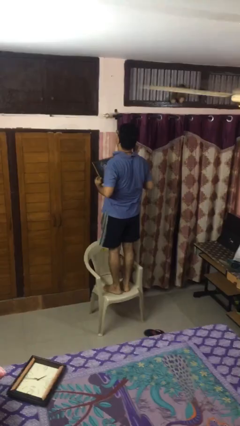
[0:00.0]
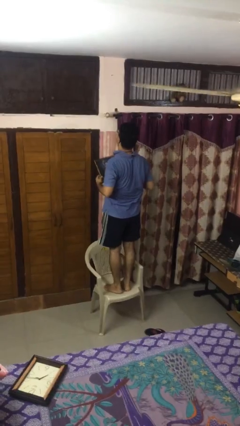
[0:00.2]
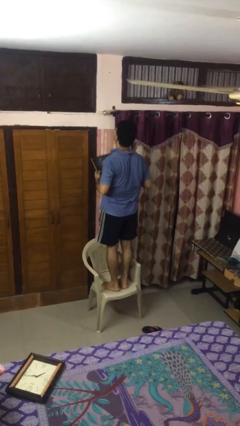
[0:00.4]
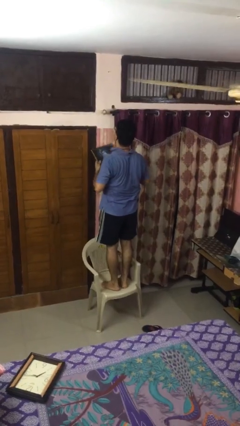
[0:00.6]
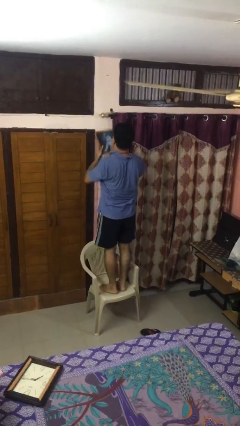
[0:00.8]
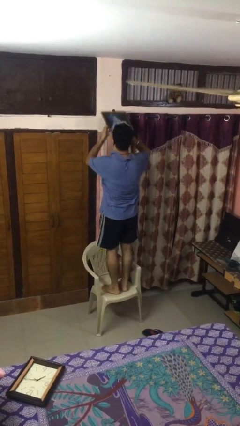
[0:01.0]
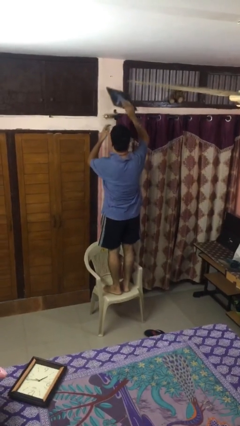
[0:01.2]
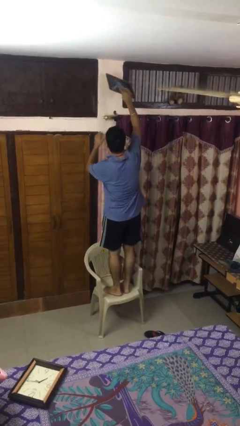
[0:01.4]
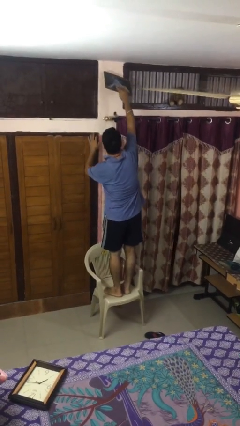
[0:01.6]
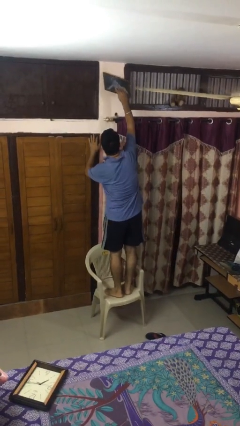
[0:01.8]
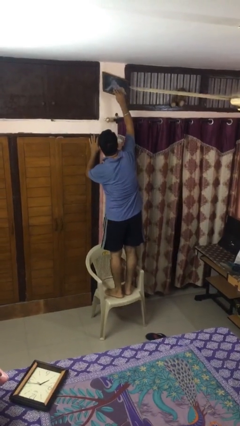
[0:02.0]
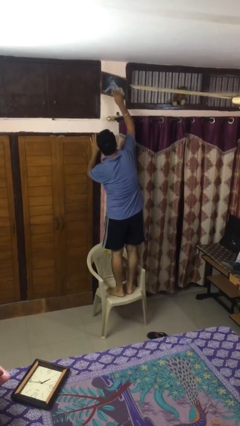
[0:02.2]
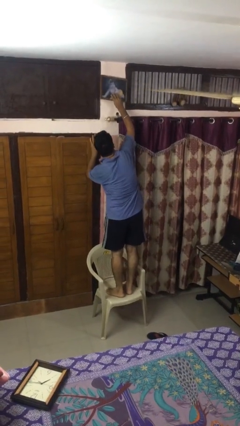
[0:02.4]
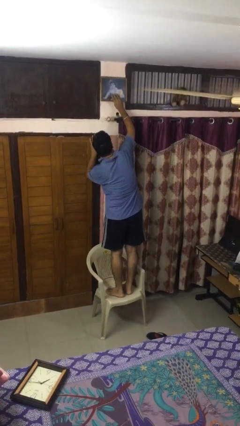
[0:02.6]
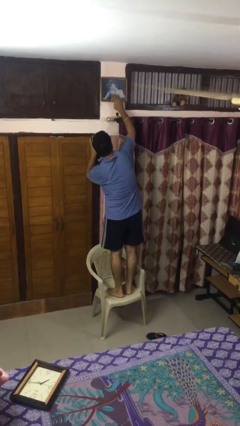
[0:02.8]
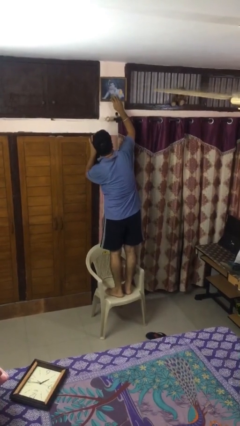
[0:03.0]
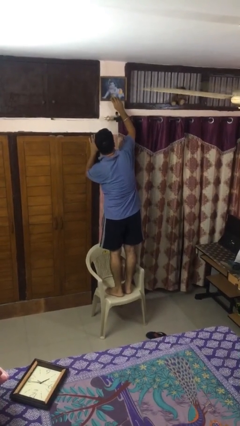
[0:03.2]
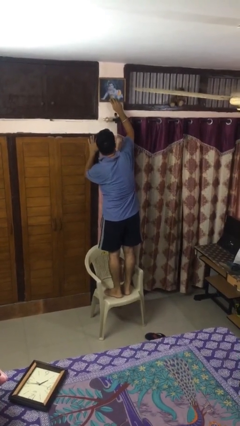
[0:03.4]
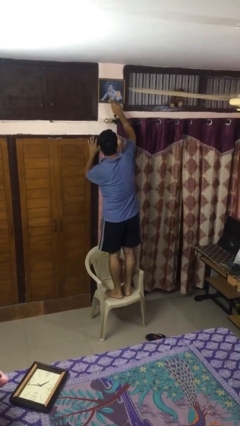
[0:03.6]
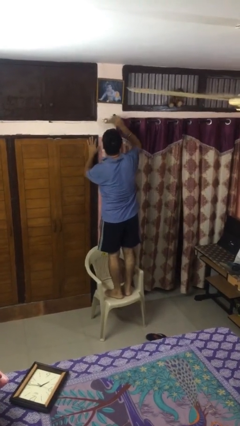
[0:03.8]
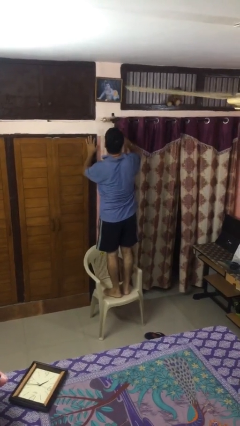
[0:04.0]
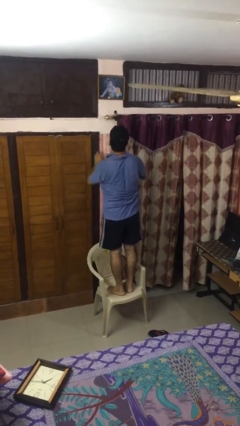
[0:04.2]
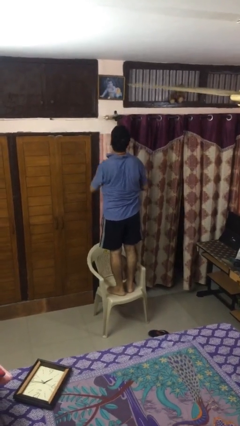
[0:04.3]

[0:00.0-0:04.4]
person puts up picture frame

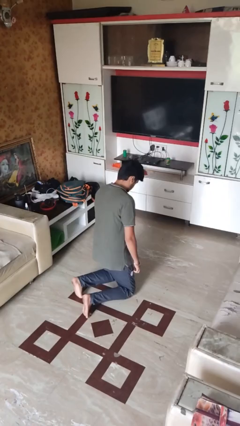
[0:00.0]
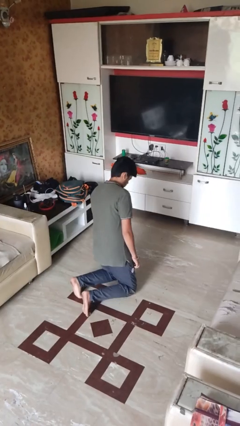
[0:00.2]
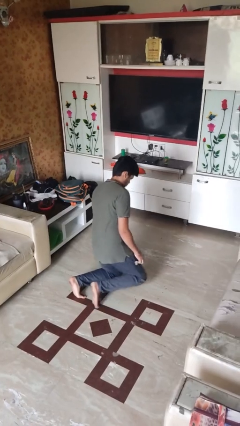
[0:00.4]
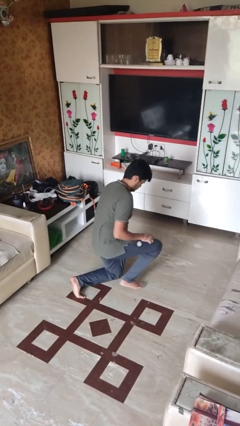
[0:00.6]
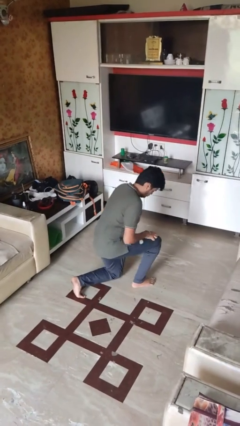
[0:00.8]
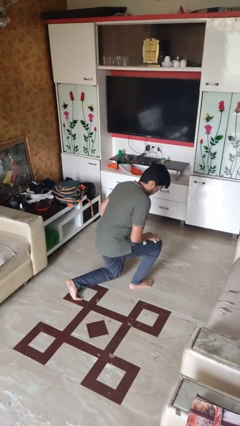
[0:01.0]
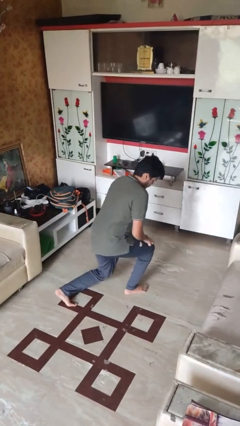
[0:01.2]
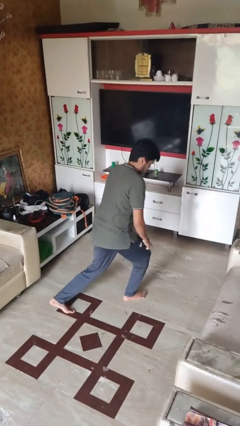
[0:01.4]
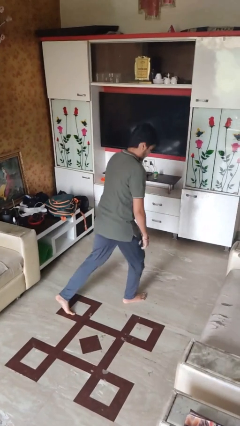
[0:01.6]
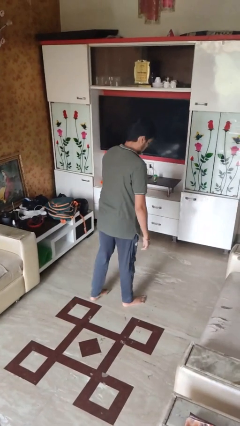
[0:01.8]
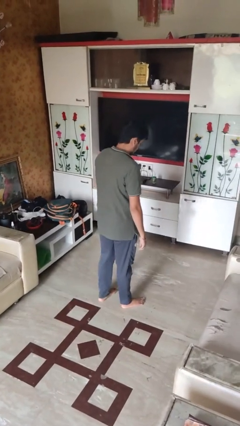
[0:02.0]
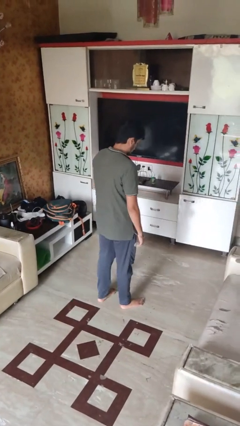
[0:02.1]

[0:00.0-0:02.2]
person stands up from floor

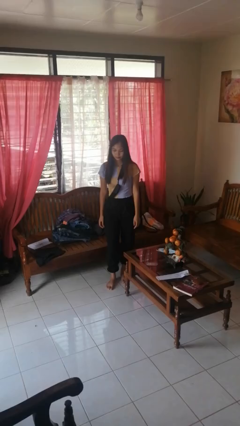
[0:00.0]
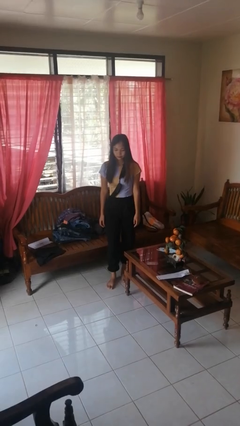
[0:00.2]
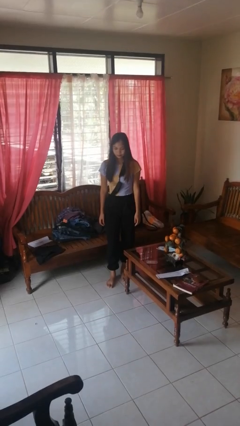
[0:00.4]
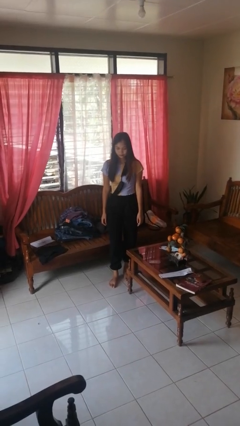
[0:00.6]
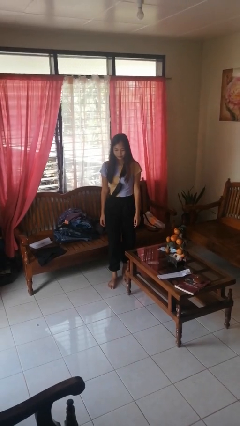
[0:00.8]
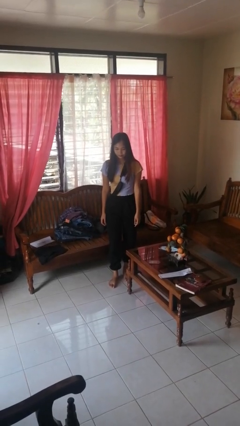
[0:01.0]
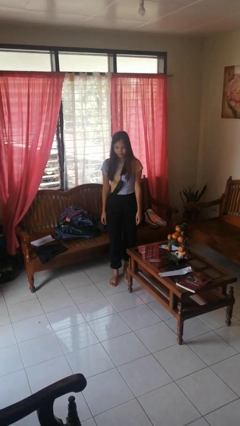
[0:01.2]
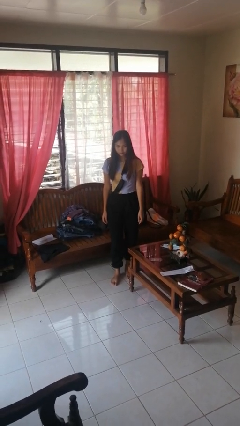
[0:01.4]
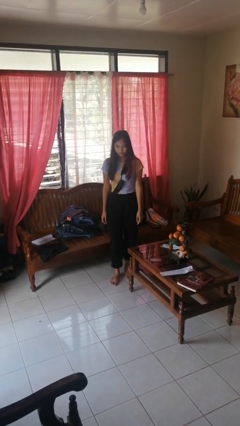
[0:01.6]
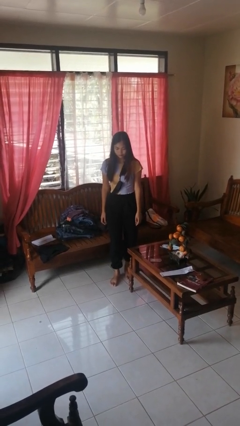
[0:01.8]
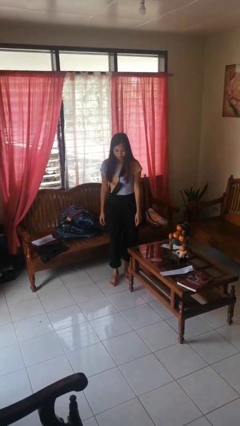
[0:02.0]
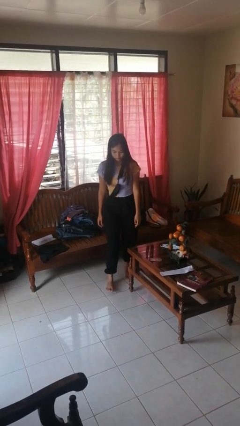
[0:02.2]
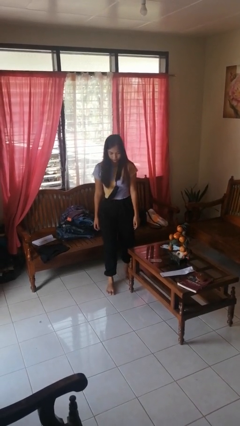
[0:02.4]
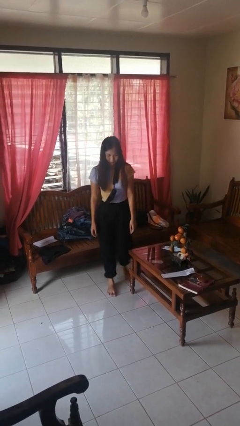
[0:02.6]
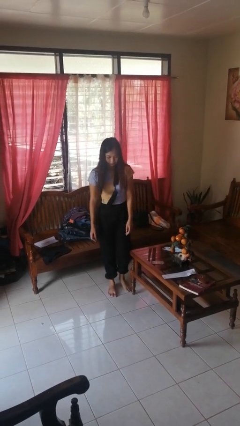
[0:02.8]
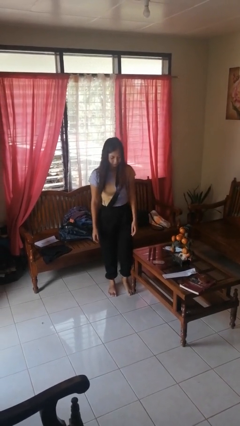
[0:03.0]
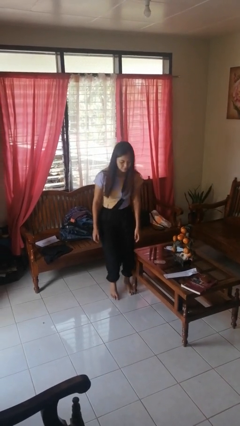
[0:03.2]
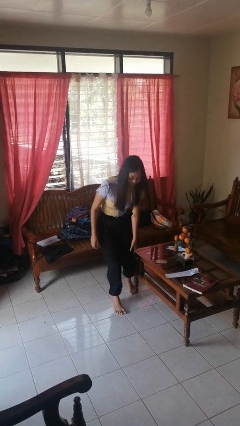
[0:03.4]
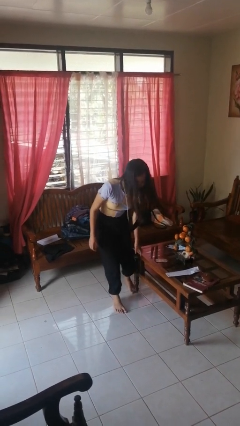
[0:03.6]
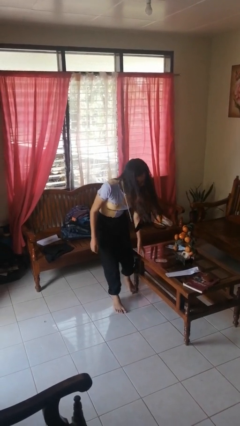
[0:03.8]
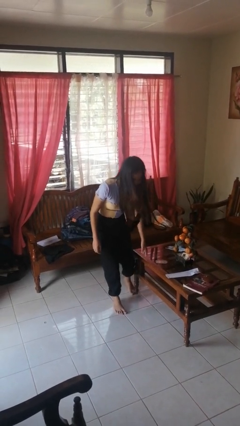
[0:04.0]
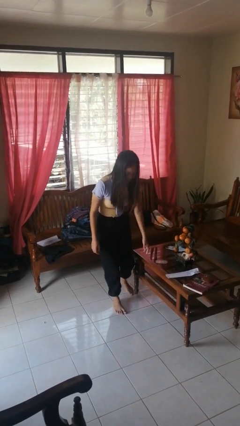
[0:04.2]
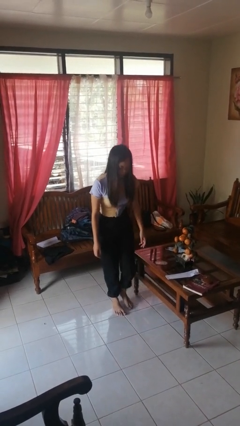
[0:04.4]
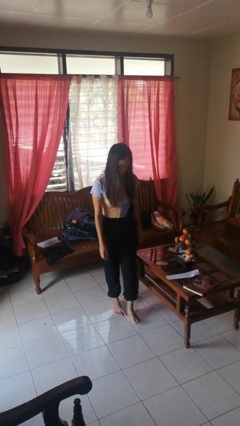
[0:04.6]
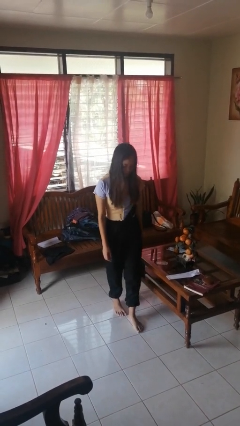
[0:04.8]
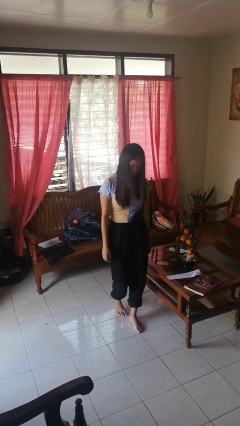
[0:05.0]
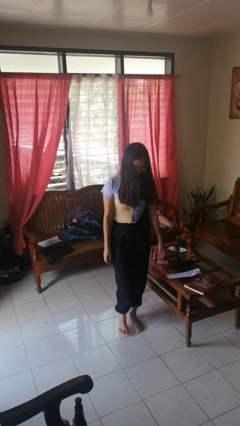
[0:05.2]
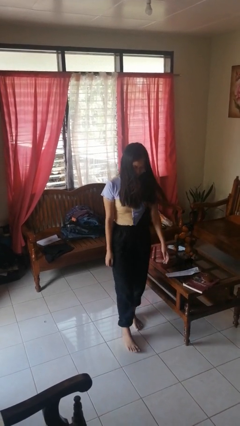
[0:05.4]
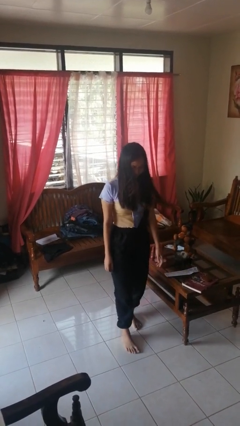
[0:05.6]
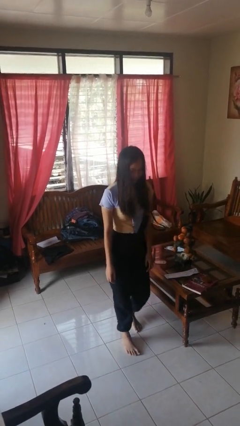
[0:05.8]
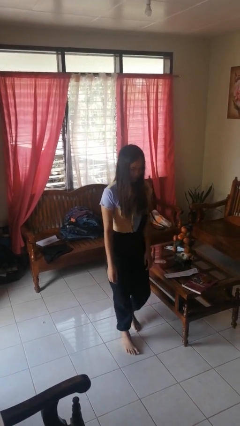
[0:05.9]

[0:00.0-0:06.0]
person bumps into table

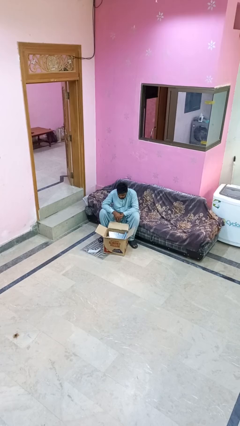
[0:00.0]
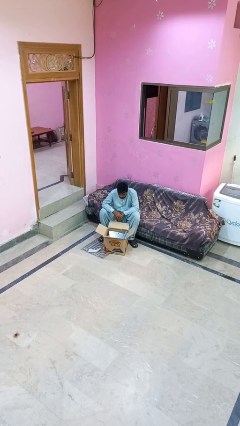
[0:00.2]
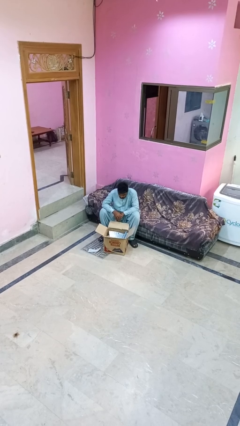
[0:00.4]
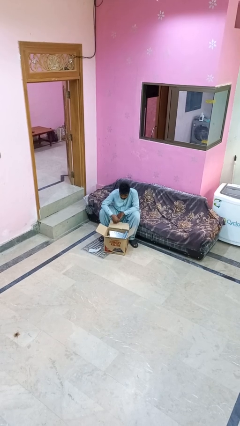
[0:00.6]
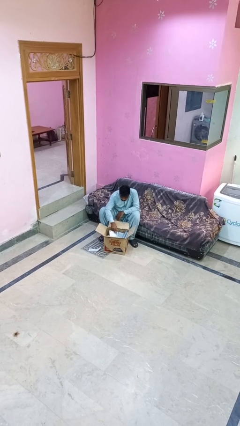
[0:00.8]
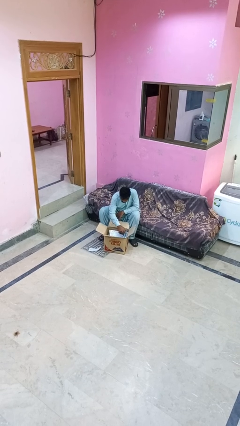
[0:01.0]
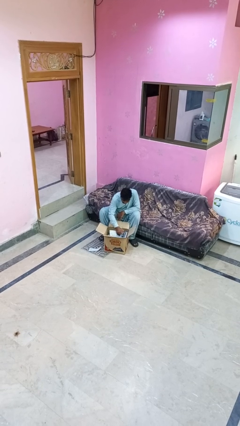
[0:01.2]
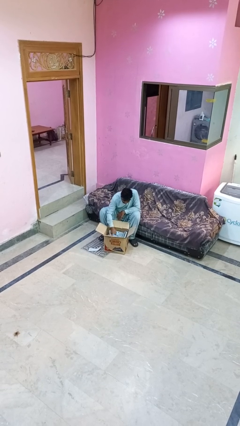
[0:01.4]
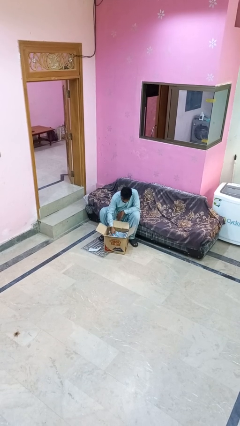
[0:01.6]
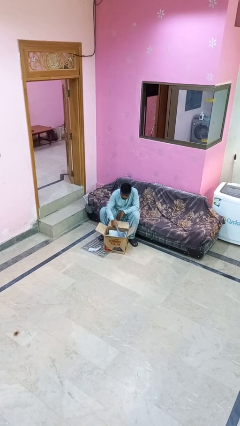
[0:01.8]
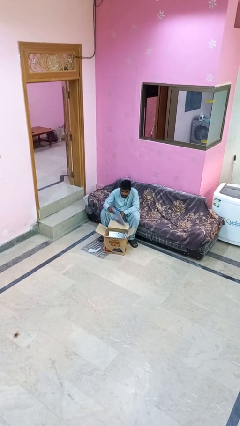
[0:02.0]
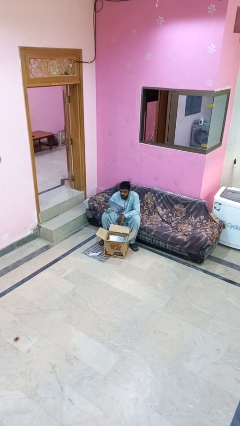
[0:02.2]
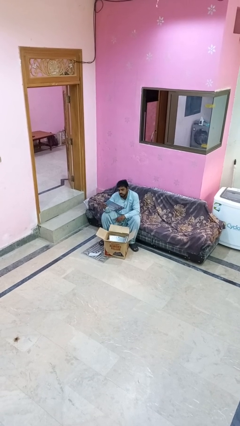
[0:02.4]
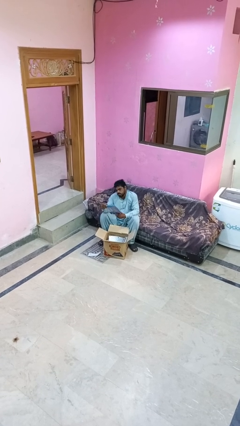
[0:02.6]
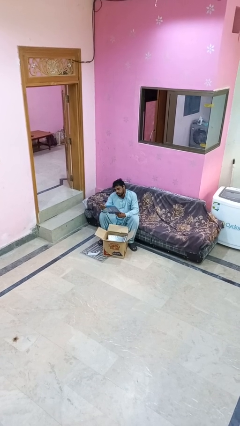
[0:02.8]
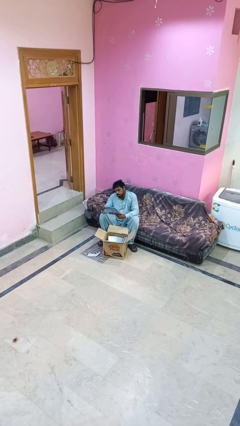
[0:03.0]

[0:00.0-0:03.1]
person takes object from box

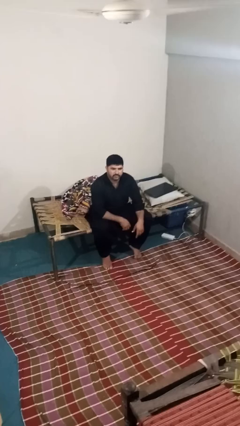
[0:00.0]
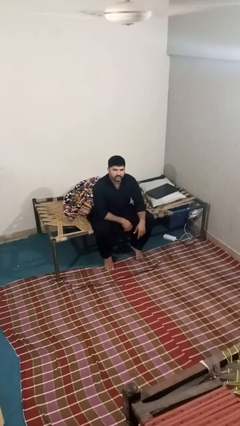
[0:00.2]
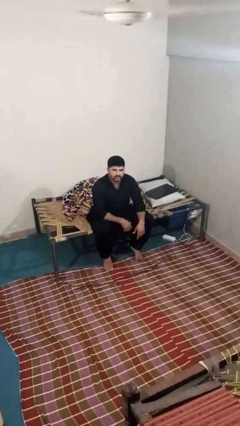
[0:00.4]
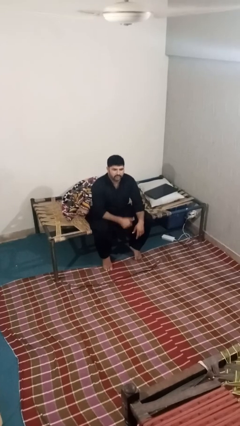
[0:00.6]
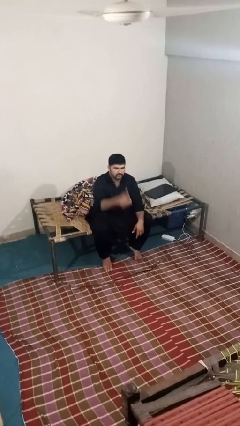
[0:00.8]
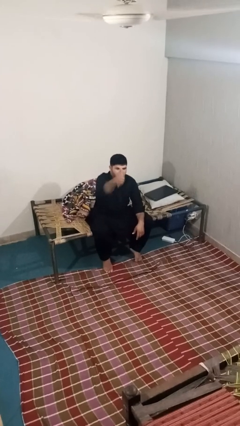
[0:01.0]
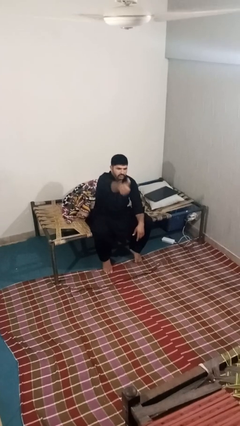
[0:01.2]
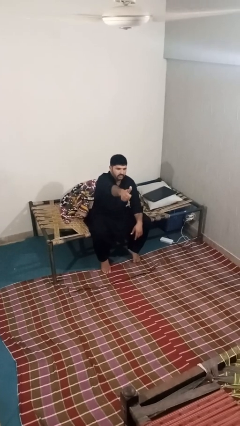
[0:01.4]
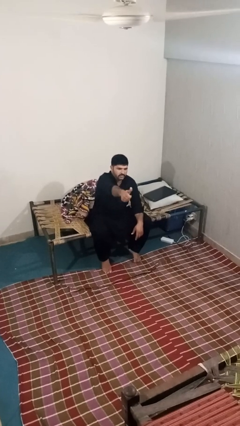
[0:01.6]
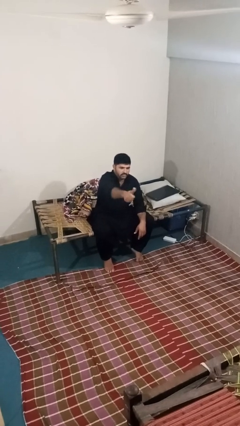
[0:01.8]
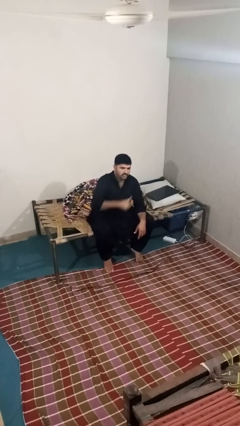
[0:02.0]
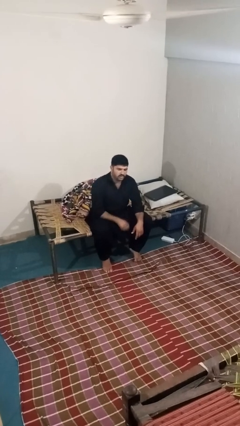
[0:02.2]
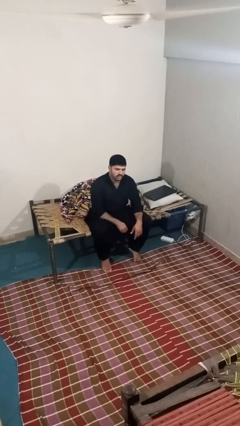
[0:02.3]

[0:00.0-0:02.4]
person gestures thumbs up
